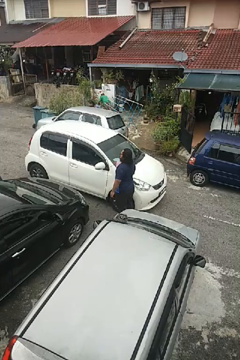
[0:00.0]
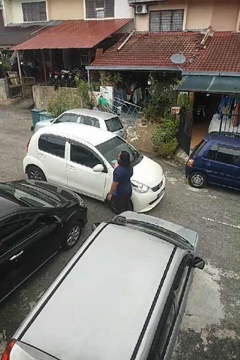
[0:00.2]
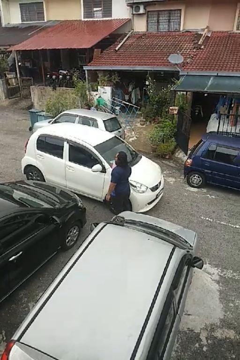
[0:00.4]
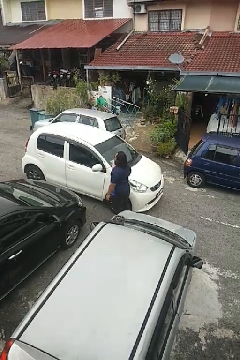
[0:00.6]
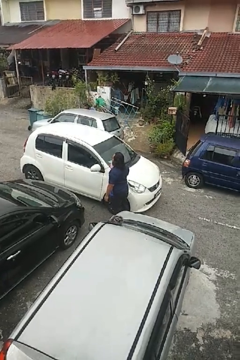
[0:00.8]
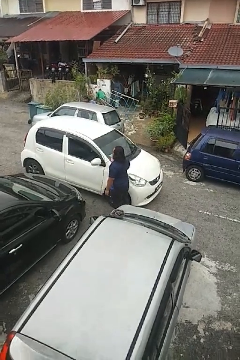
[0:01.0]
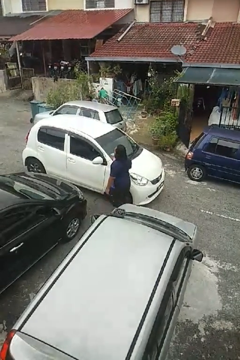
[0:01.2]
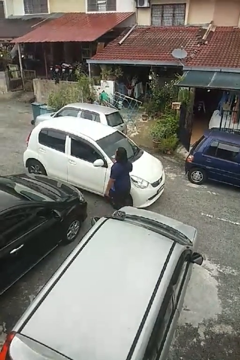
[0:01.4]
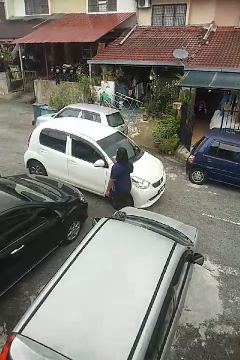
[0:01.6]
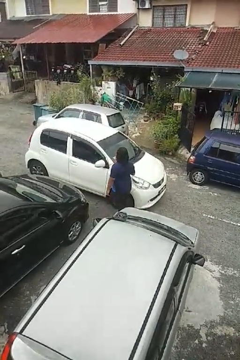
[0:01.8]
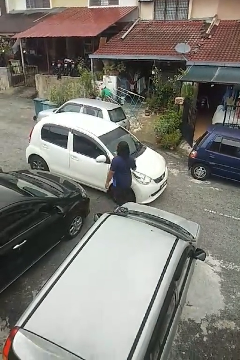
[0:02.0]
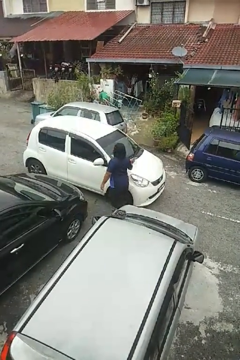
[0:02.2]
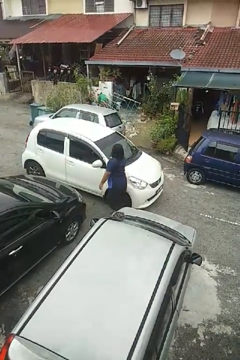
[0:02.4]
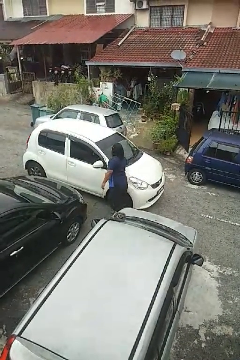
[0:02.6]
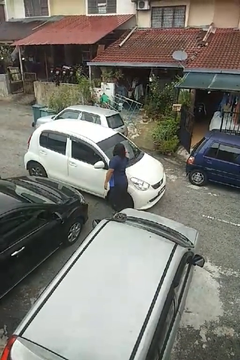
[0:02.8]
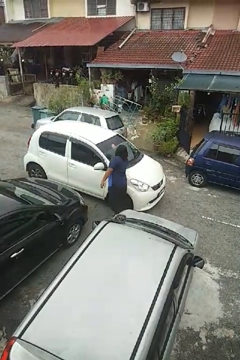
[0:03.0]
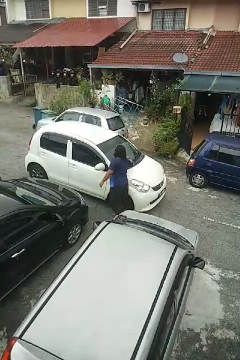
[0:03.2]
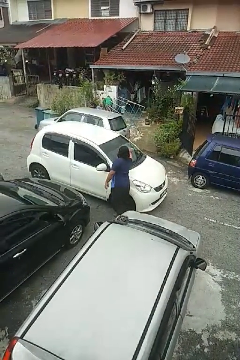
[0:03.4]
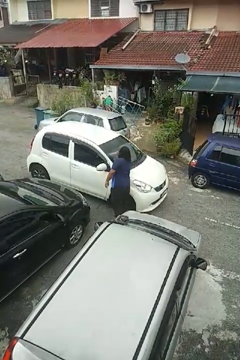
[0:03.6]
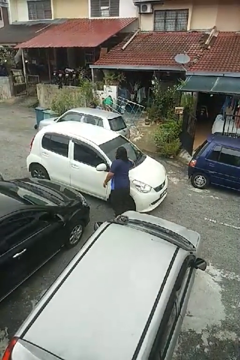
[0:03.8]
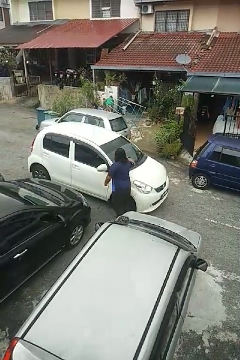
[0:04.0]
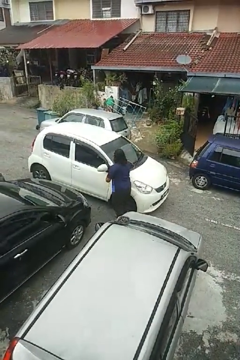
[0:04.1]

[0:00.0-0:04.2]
person polishes car with rag

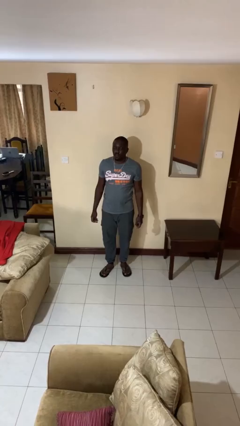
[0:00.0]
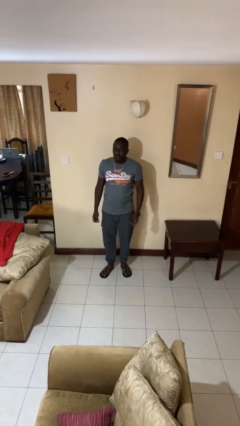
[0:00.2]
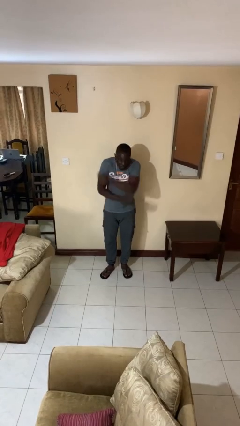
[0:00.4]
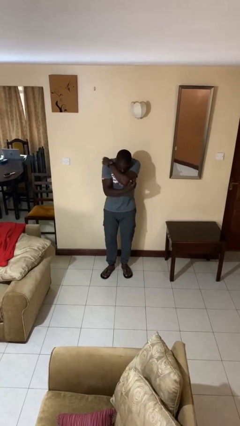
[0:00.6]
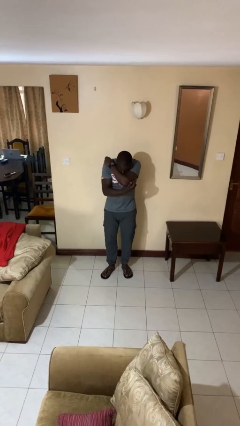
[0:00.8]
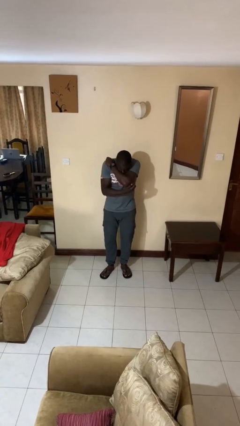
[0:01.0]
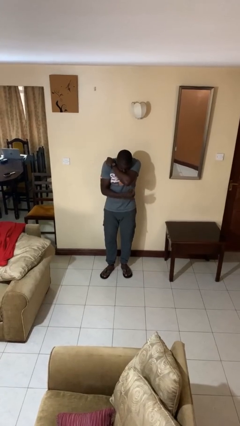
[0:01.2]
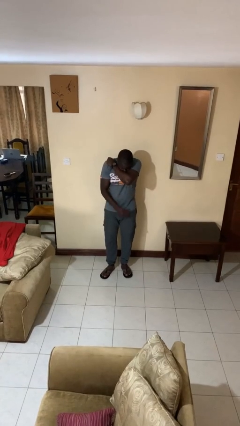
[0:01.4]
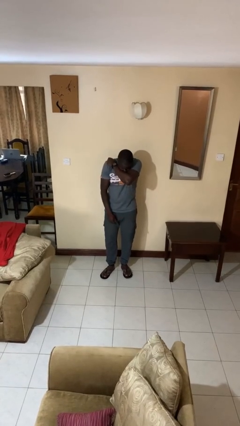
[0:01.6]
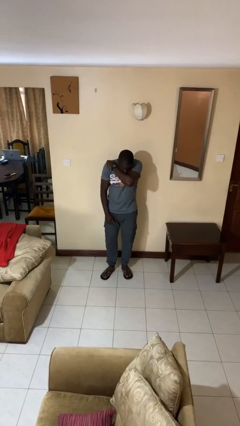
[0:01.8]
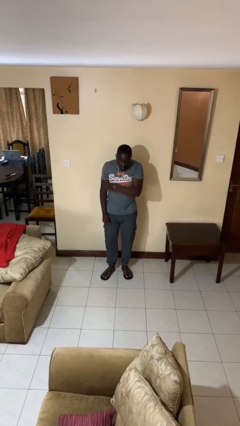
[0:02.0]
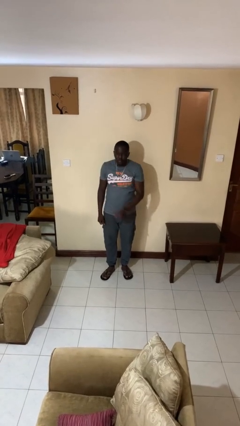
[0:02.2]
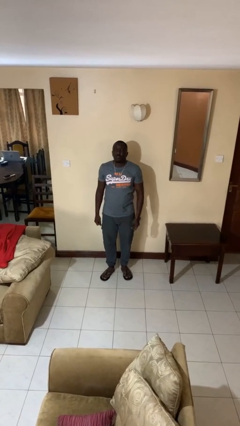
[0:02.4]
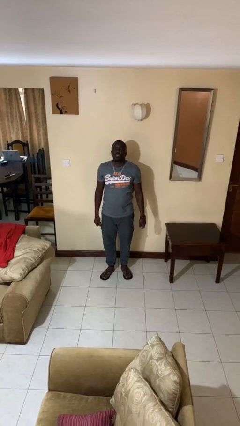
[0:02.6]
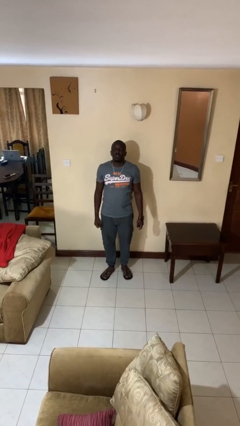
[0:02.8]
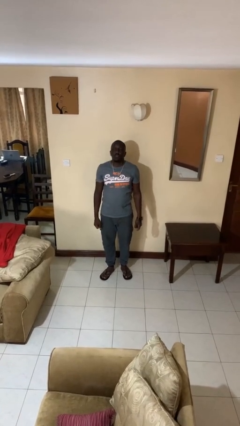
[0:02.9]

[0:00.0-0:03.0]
person sneezes into arm

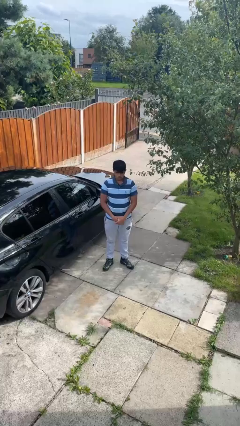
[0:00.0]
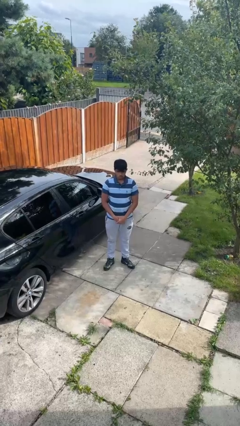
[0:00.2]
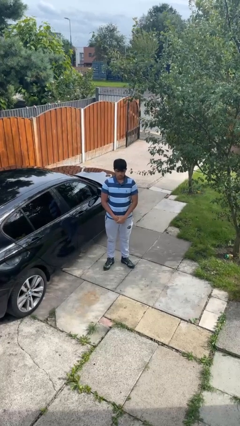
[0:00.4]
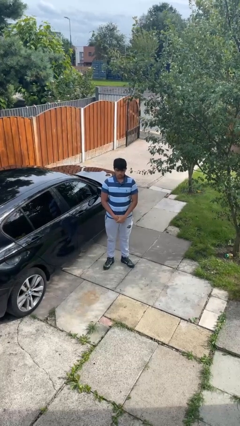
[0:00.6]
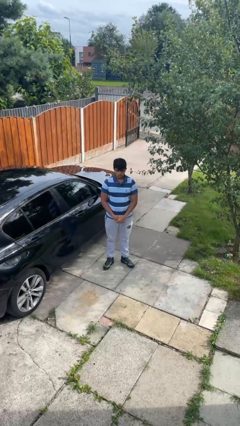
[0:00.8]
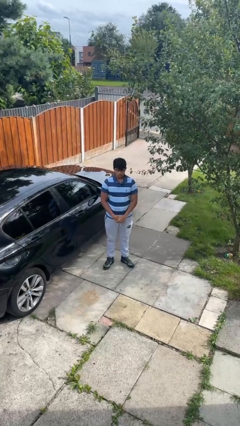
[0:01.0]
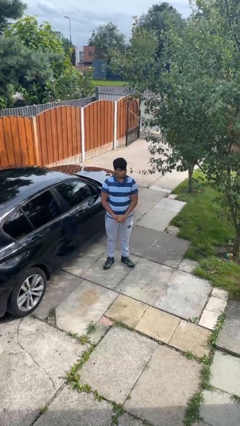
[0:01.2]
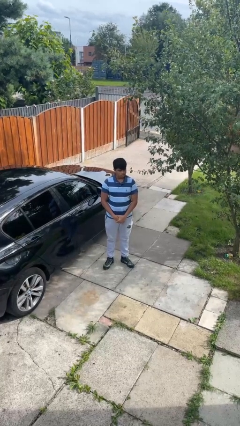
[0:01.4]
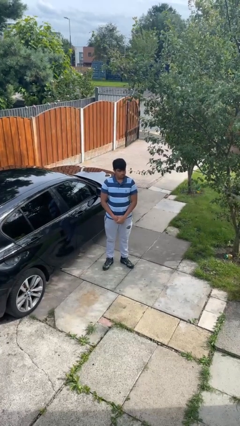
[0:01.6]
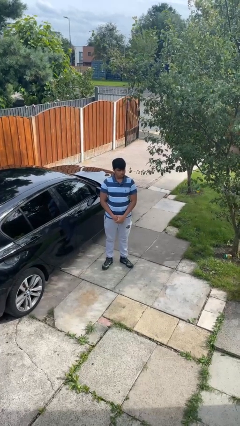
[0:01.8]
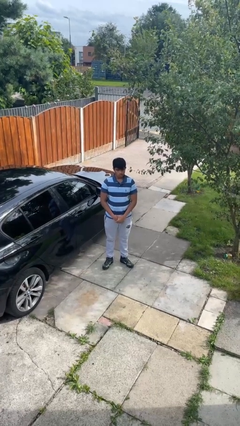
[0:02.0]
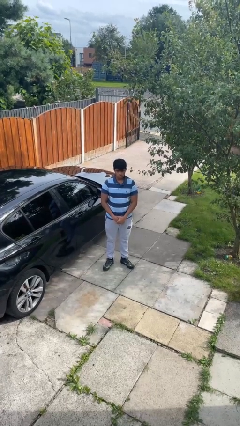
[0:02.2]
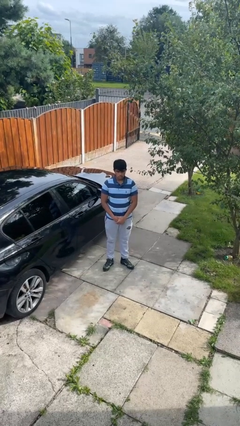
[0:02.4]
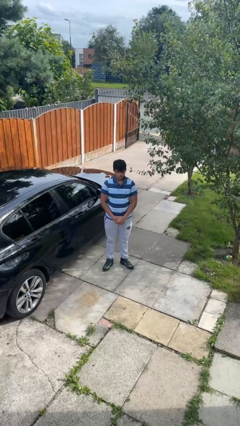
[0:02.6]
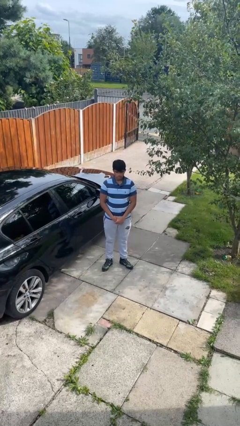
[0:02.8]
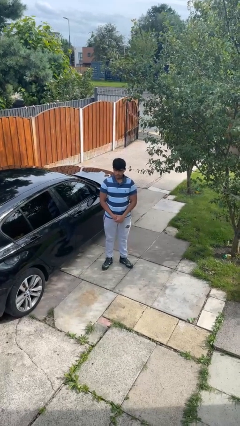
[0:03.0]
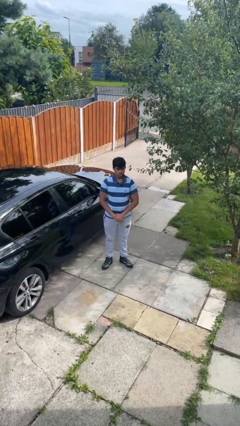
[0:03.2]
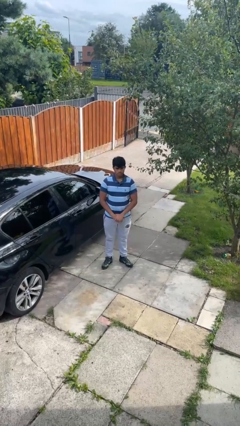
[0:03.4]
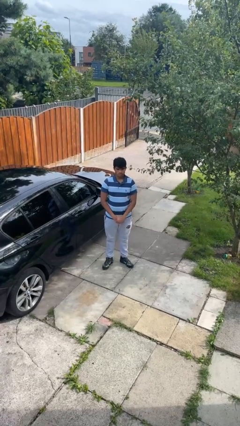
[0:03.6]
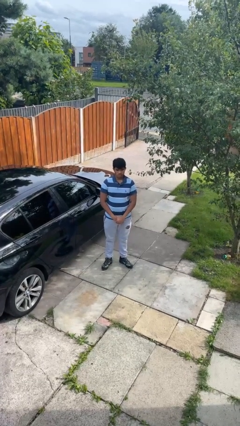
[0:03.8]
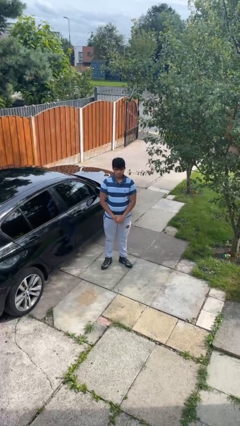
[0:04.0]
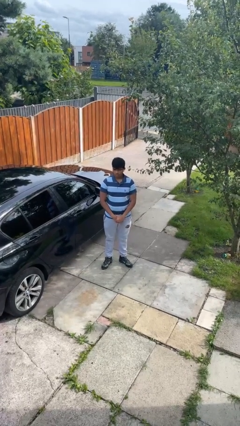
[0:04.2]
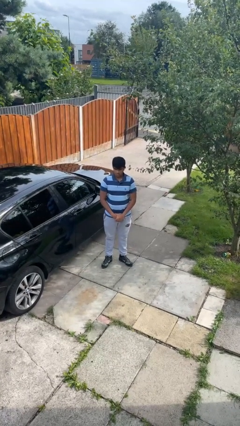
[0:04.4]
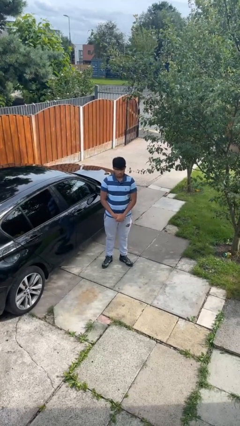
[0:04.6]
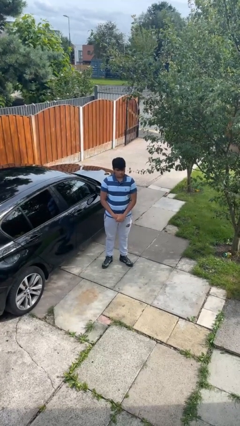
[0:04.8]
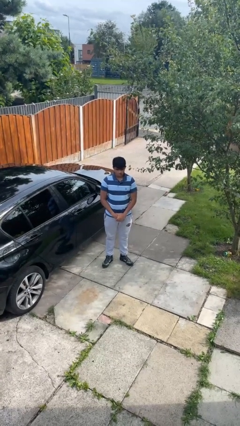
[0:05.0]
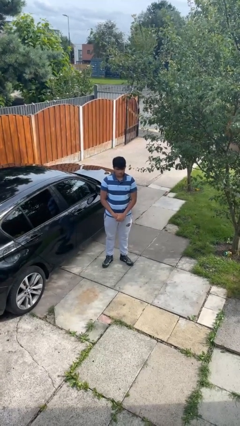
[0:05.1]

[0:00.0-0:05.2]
person shakes head

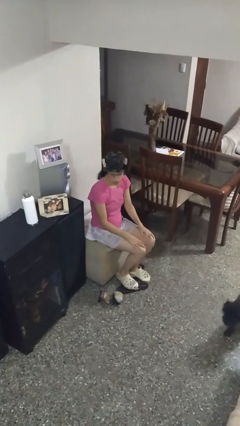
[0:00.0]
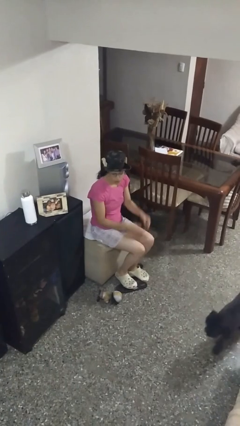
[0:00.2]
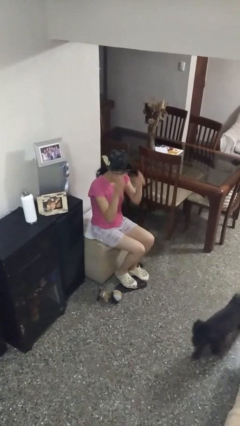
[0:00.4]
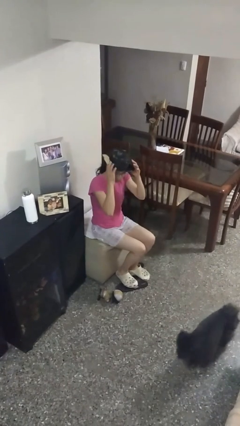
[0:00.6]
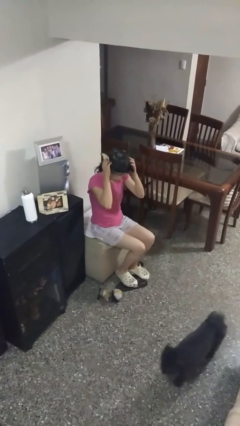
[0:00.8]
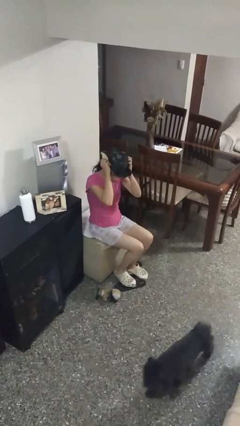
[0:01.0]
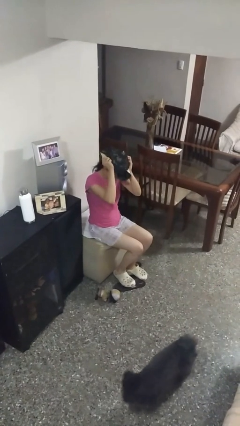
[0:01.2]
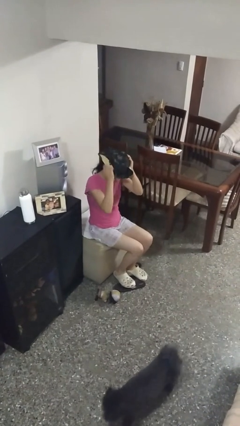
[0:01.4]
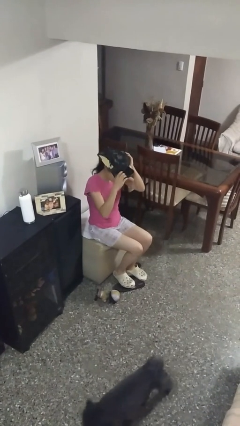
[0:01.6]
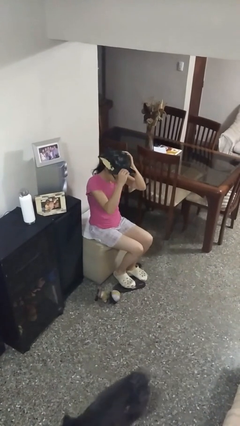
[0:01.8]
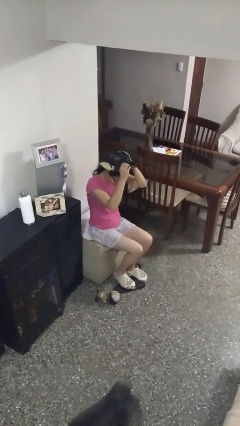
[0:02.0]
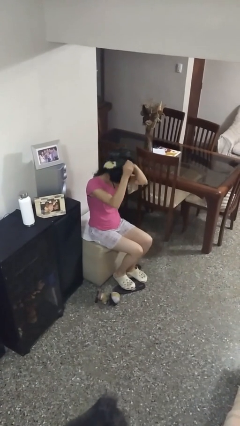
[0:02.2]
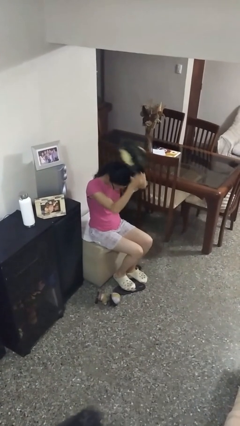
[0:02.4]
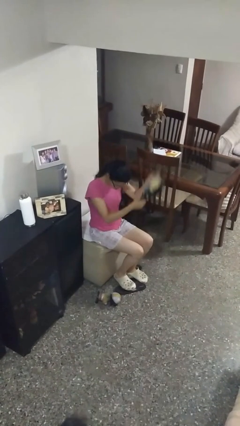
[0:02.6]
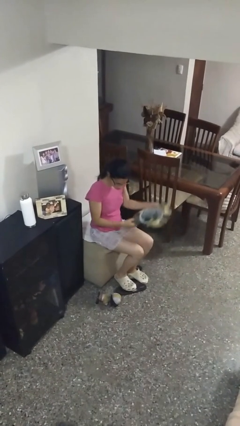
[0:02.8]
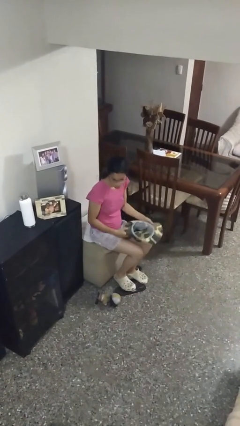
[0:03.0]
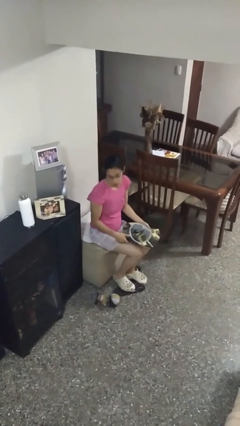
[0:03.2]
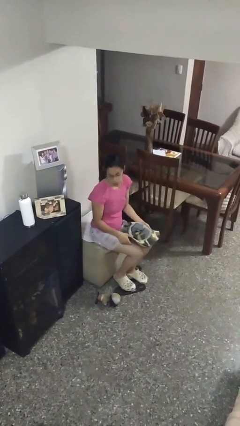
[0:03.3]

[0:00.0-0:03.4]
person takes off hat

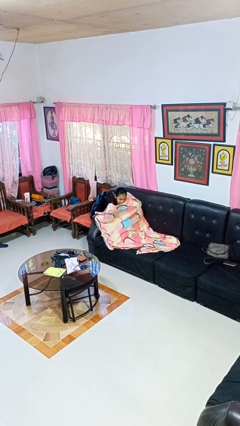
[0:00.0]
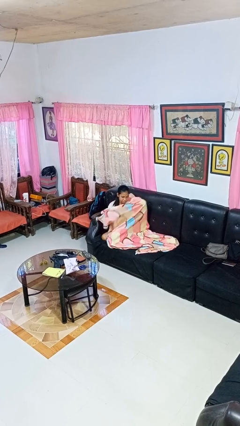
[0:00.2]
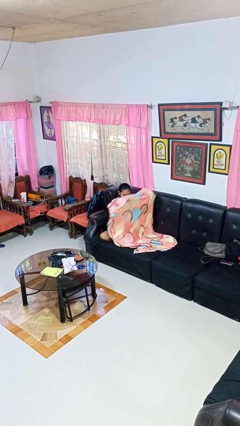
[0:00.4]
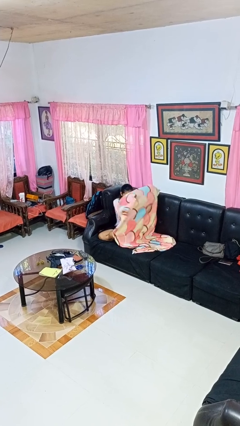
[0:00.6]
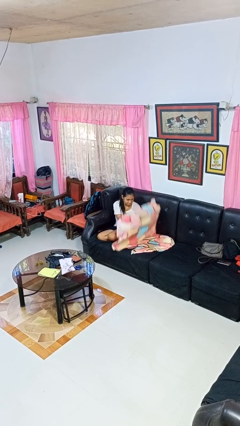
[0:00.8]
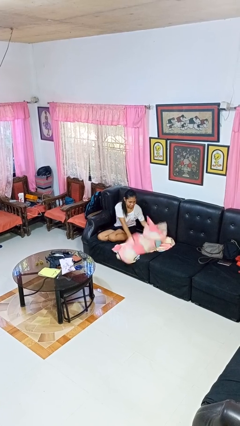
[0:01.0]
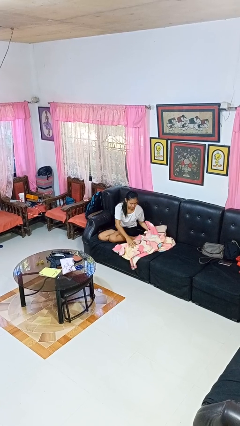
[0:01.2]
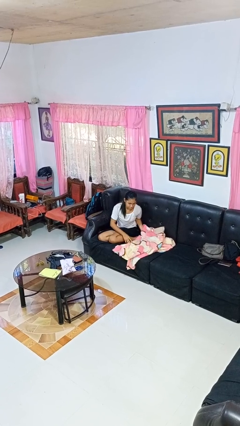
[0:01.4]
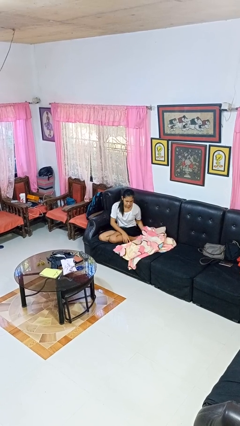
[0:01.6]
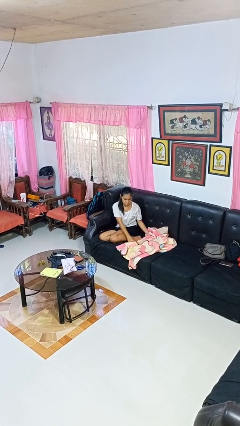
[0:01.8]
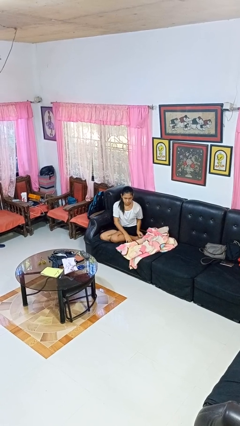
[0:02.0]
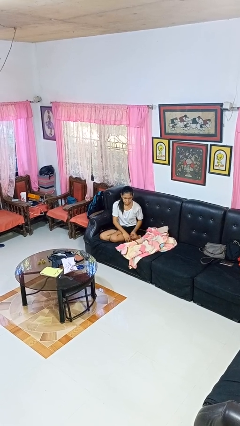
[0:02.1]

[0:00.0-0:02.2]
person uncovers with blanket

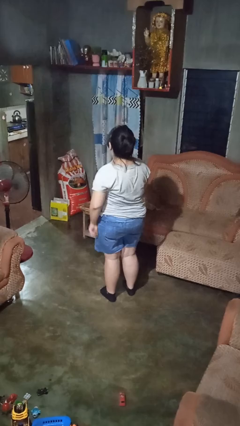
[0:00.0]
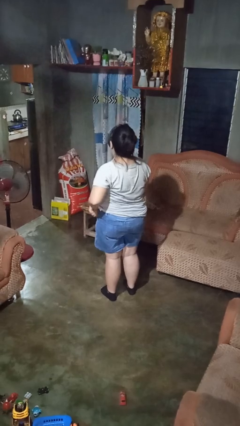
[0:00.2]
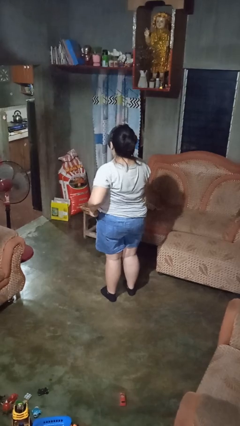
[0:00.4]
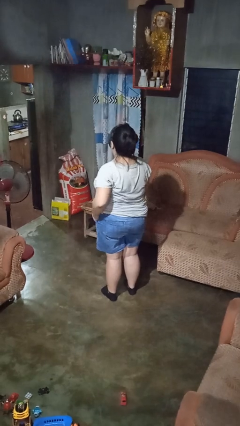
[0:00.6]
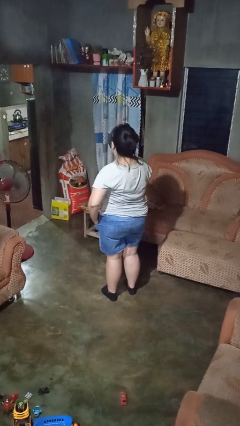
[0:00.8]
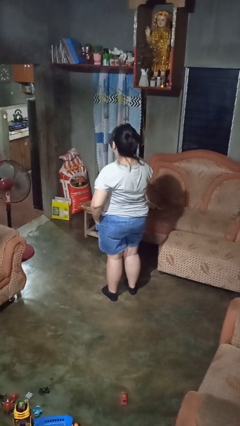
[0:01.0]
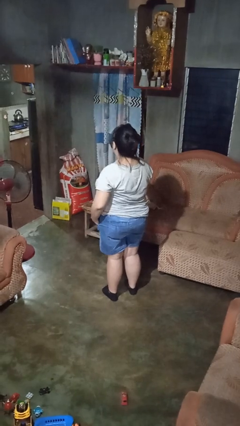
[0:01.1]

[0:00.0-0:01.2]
person puts hands in back pockets
